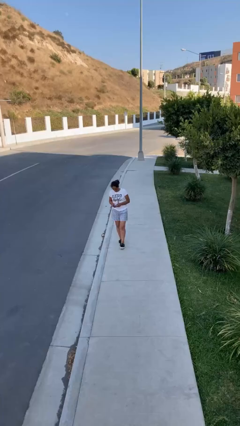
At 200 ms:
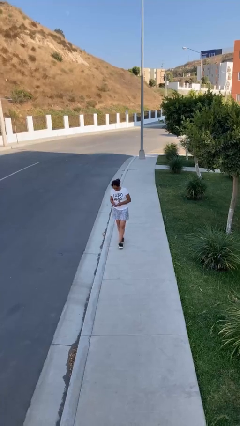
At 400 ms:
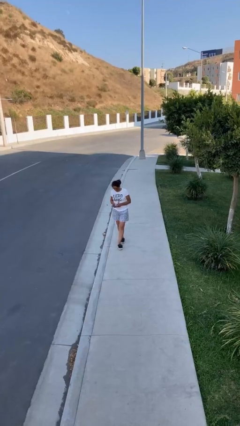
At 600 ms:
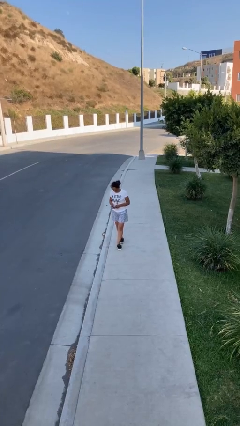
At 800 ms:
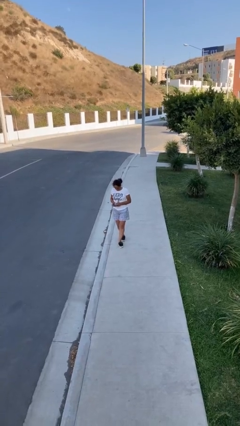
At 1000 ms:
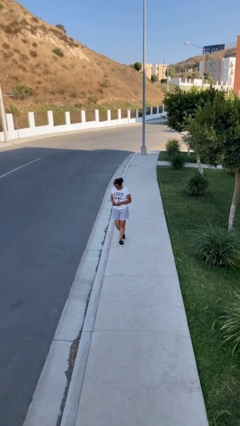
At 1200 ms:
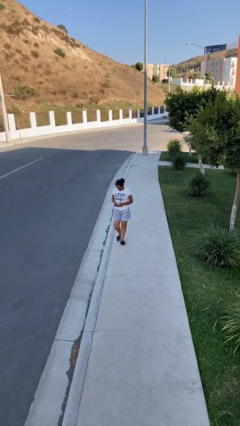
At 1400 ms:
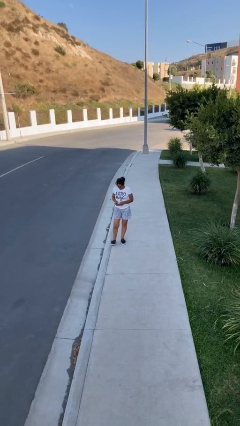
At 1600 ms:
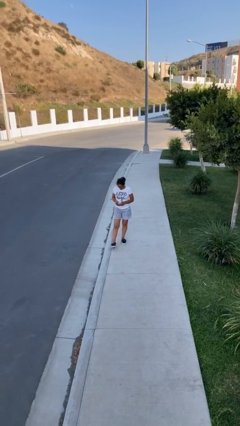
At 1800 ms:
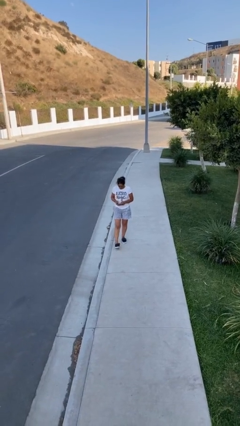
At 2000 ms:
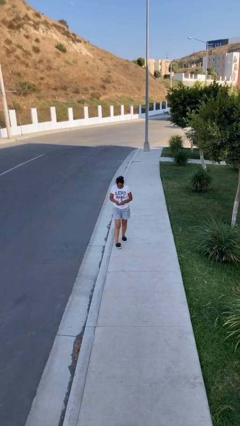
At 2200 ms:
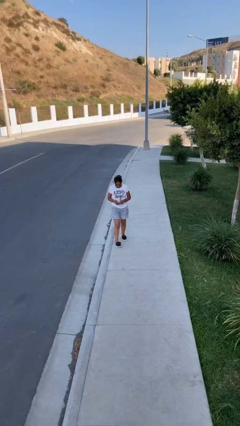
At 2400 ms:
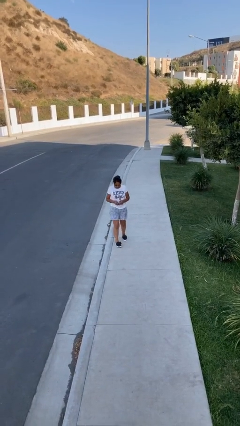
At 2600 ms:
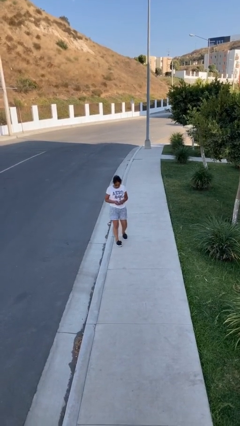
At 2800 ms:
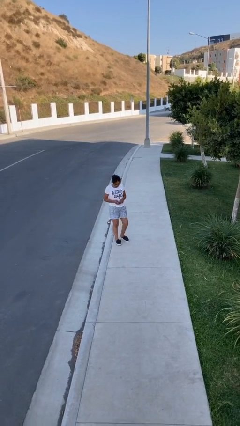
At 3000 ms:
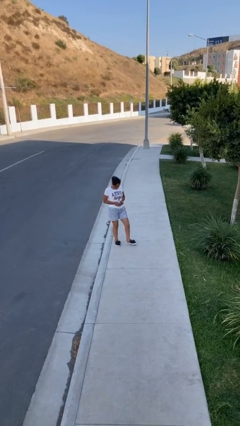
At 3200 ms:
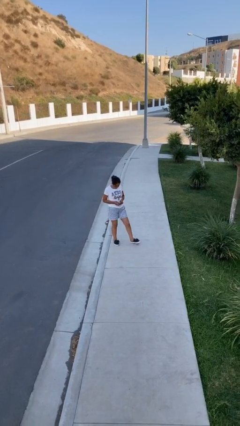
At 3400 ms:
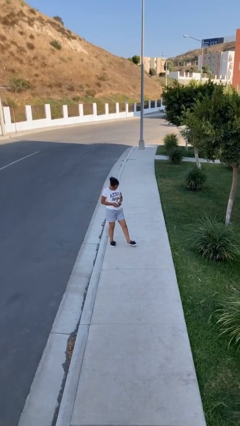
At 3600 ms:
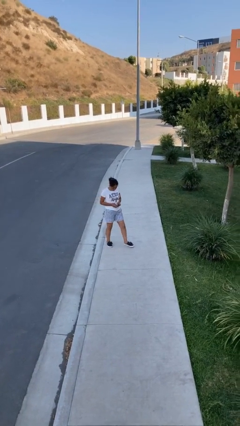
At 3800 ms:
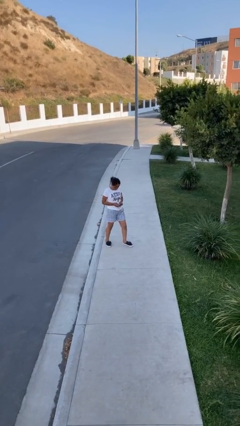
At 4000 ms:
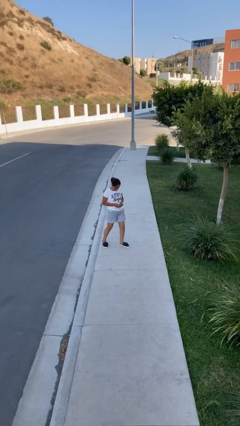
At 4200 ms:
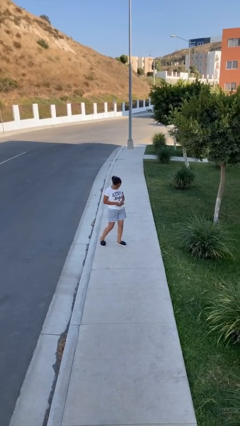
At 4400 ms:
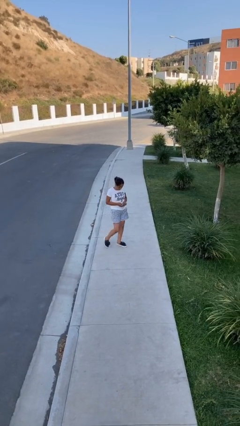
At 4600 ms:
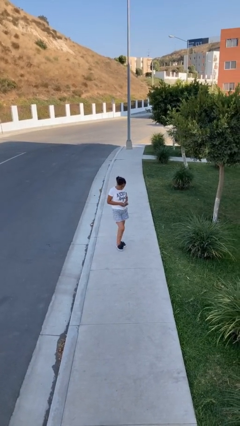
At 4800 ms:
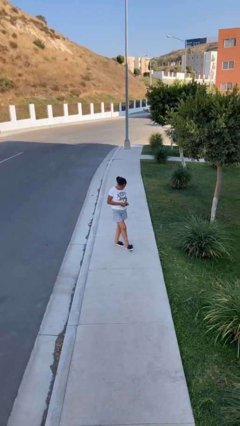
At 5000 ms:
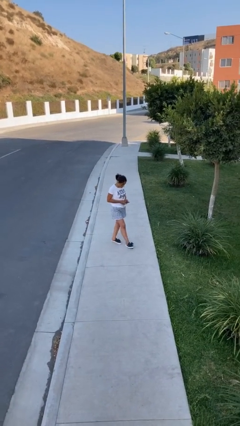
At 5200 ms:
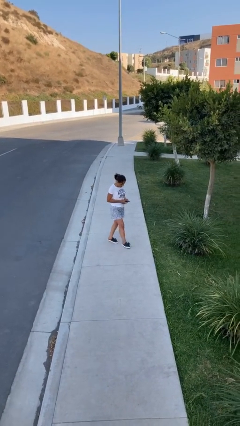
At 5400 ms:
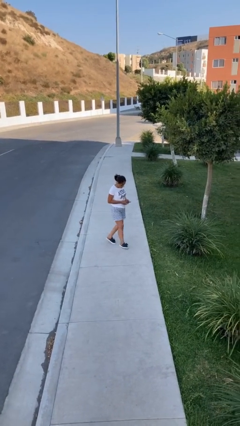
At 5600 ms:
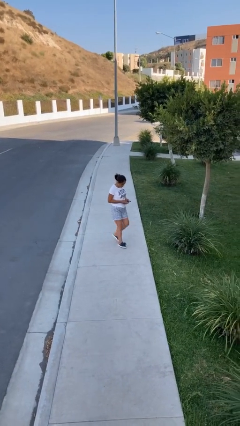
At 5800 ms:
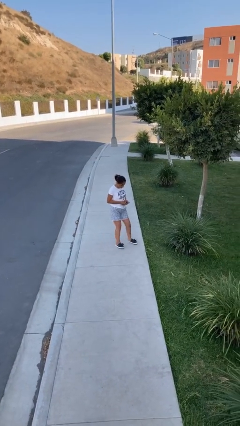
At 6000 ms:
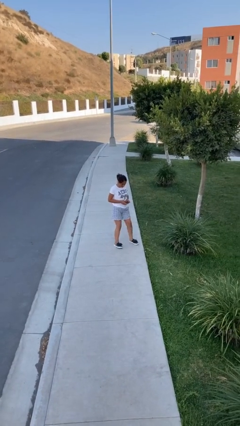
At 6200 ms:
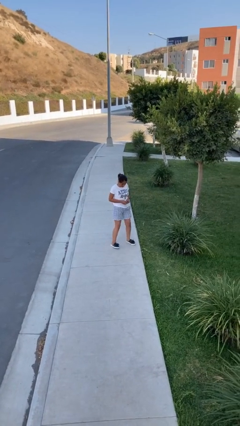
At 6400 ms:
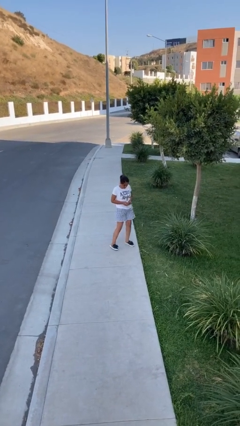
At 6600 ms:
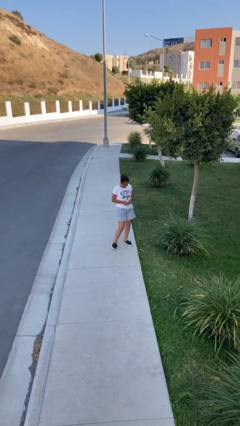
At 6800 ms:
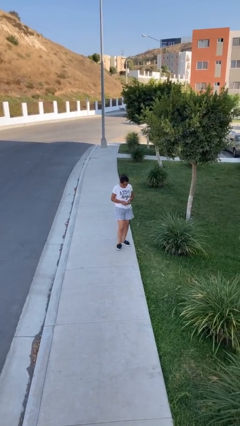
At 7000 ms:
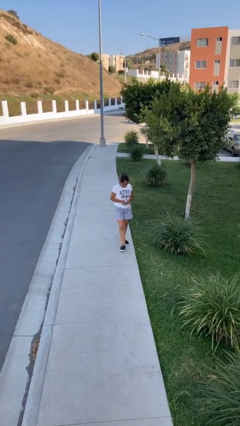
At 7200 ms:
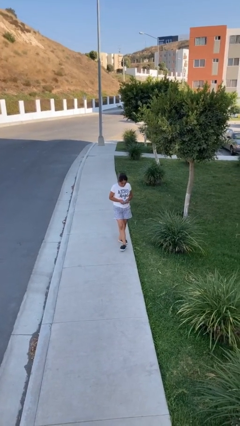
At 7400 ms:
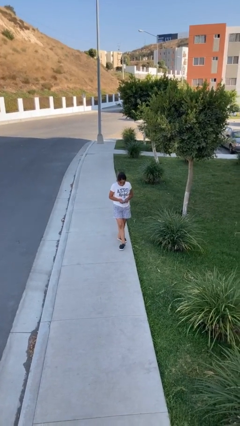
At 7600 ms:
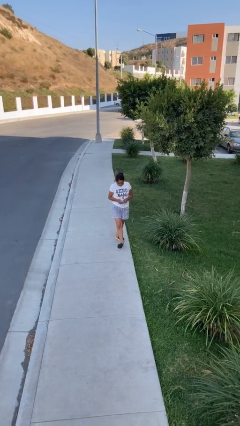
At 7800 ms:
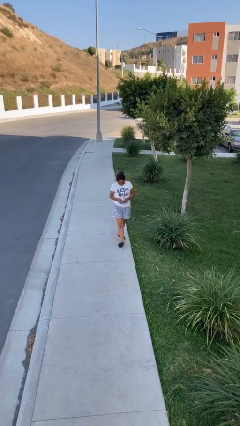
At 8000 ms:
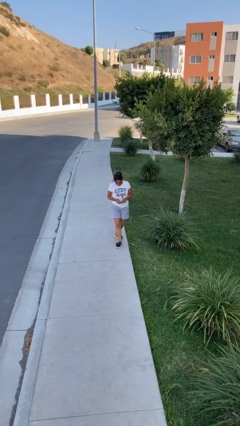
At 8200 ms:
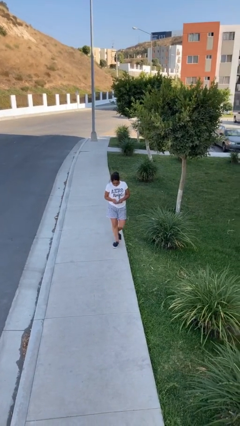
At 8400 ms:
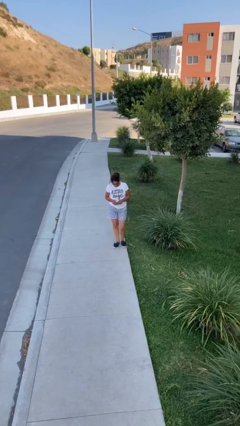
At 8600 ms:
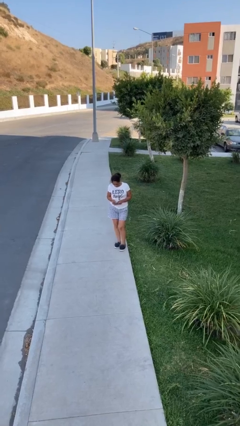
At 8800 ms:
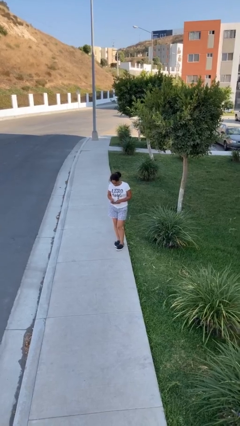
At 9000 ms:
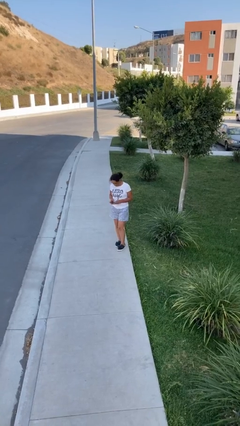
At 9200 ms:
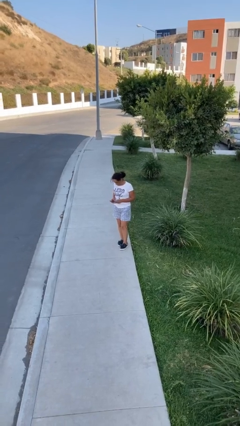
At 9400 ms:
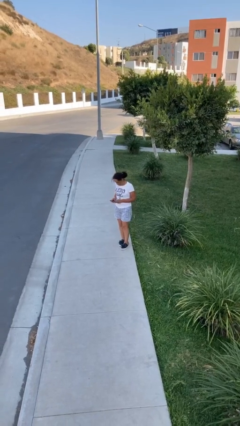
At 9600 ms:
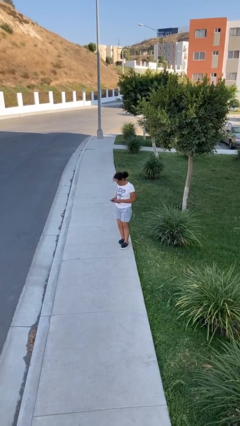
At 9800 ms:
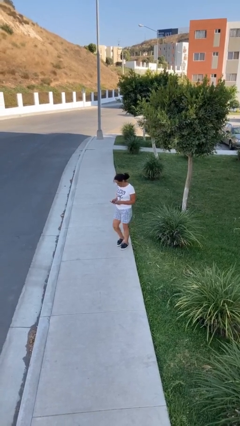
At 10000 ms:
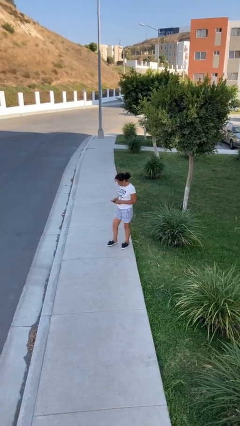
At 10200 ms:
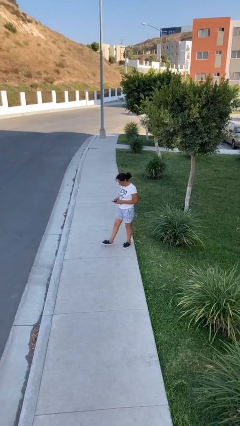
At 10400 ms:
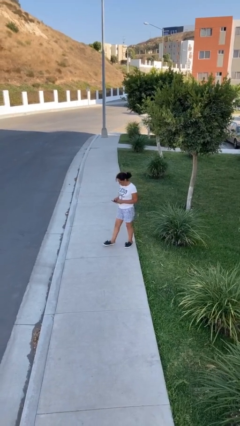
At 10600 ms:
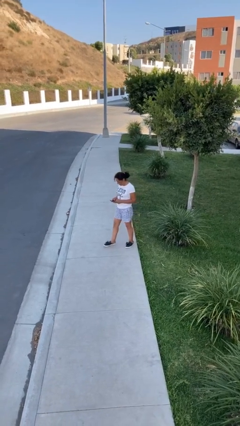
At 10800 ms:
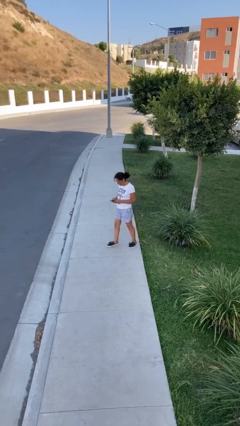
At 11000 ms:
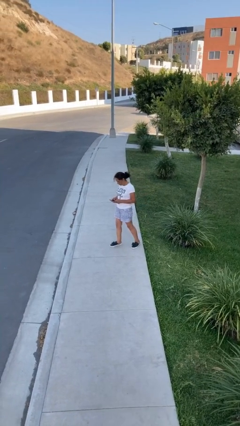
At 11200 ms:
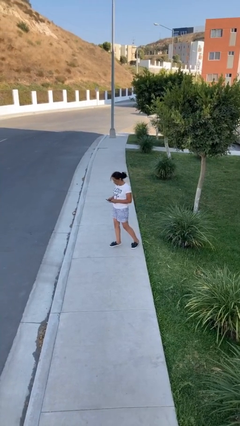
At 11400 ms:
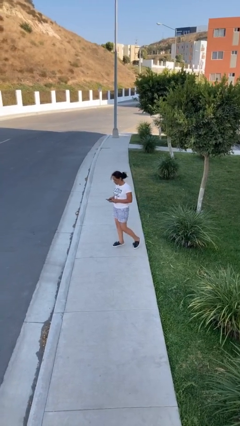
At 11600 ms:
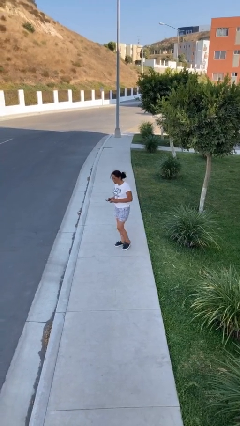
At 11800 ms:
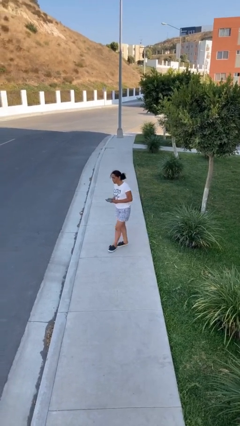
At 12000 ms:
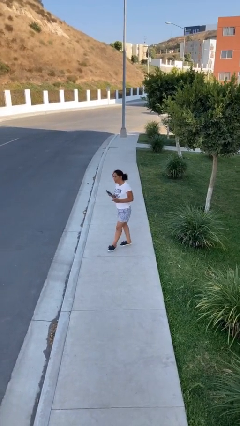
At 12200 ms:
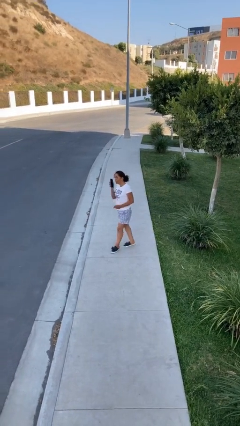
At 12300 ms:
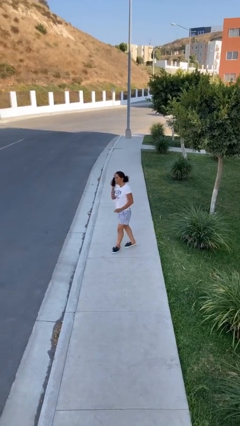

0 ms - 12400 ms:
person texts on phone

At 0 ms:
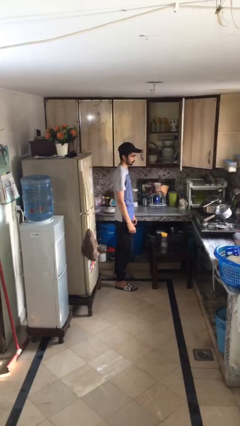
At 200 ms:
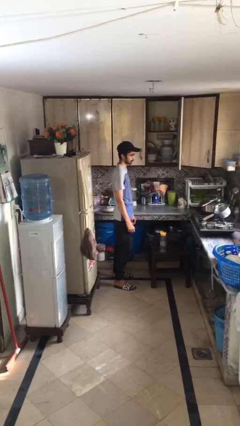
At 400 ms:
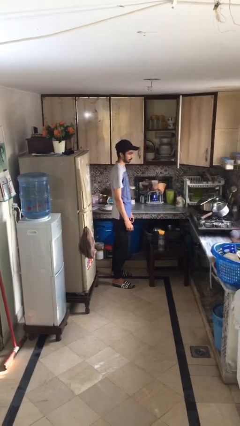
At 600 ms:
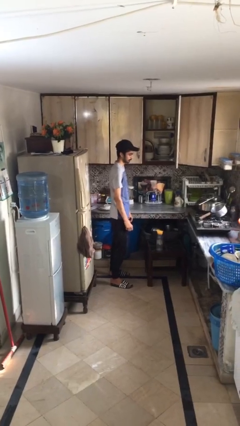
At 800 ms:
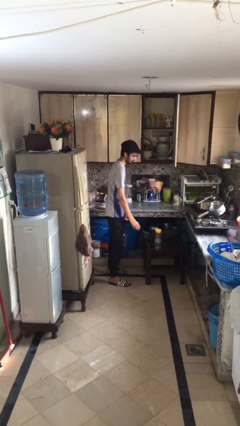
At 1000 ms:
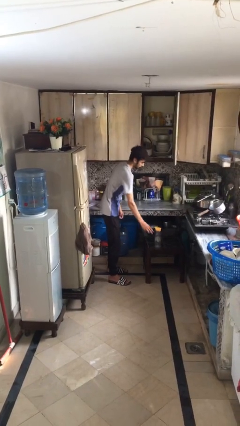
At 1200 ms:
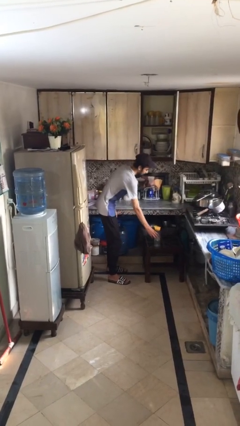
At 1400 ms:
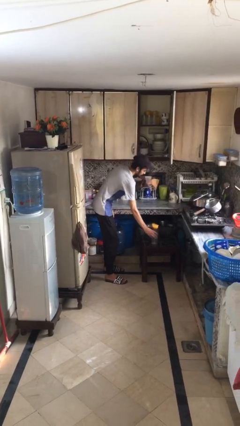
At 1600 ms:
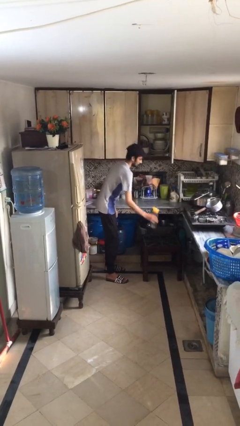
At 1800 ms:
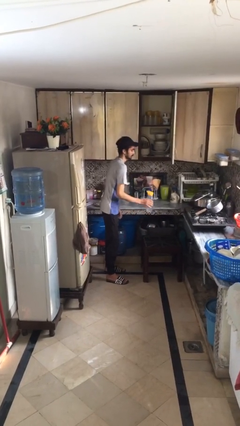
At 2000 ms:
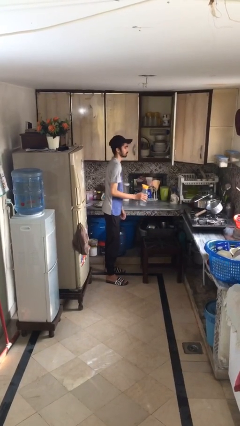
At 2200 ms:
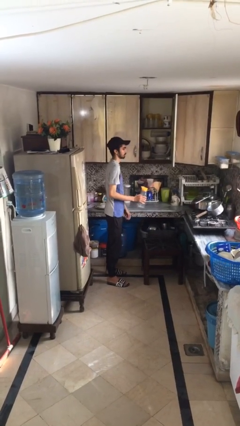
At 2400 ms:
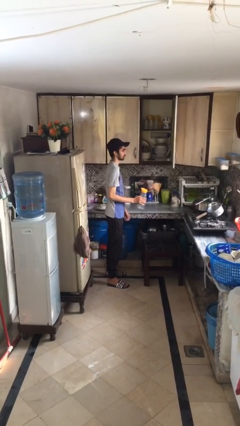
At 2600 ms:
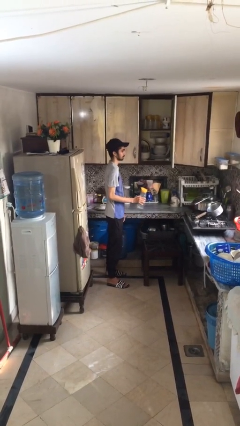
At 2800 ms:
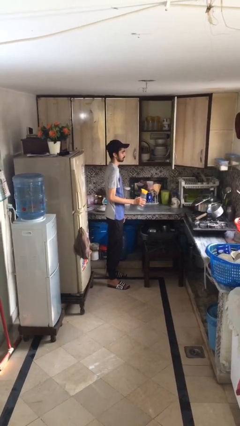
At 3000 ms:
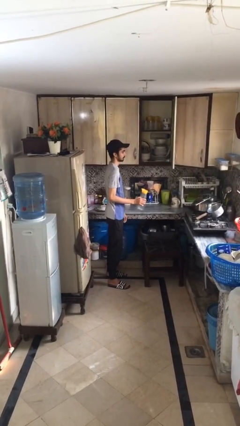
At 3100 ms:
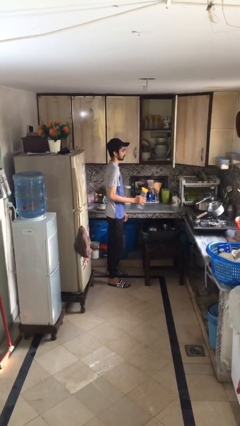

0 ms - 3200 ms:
person picks up object from table

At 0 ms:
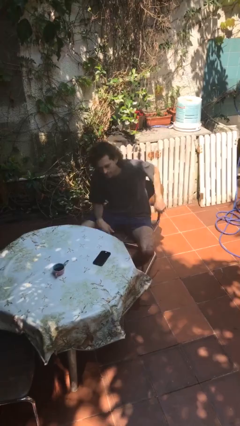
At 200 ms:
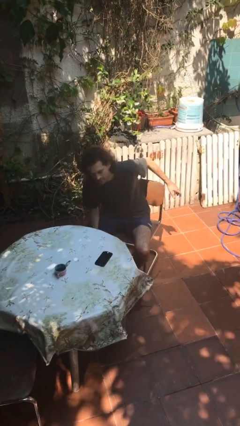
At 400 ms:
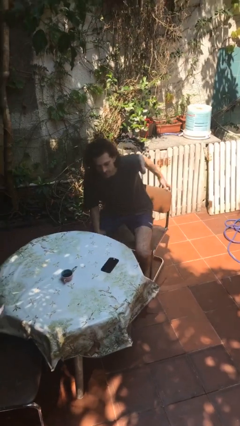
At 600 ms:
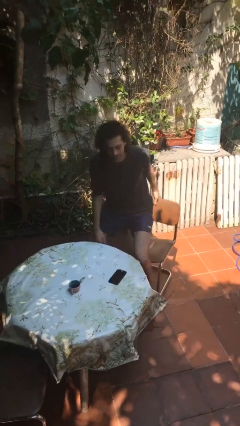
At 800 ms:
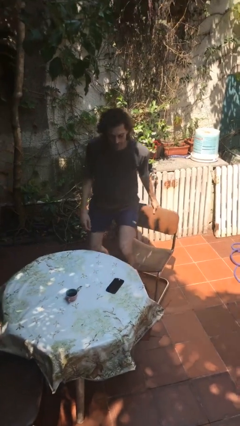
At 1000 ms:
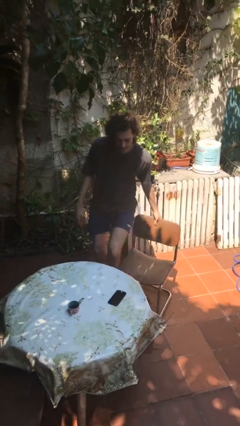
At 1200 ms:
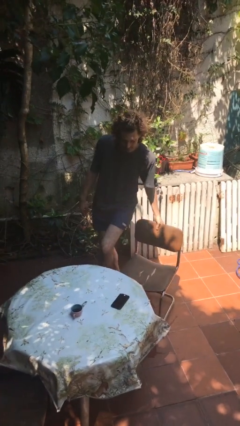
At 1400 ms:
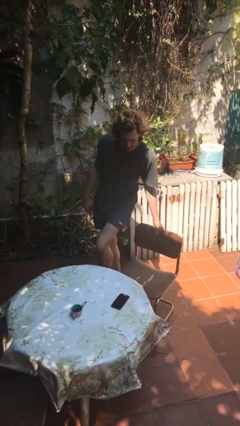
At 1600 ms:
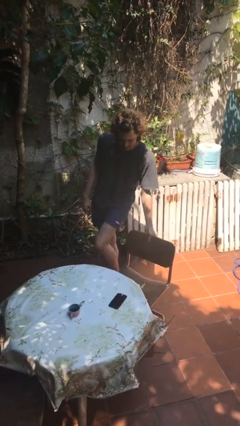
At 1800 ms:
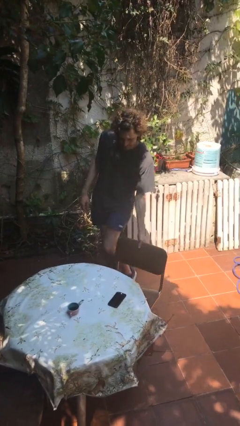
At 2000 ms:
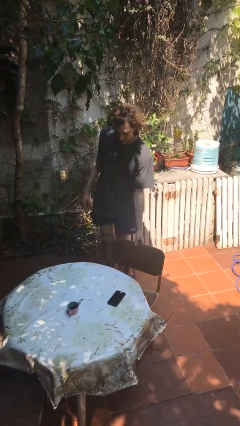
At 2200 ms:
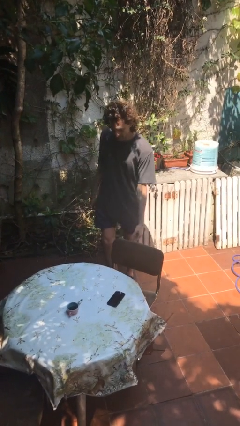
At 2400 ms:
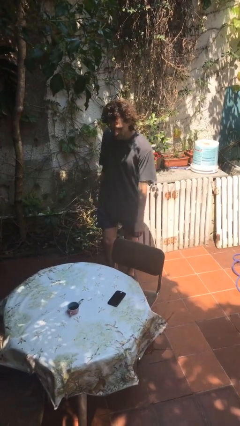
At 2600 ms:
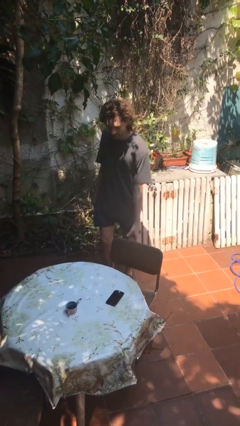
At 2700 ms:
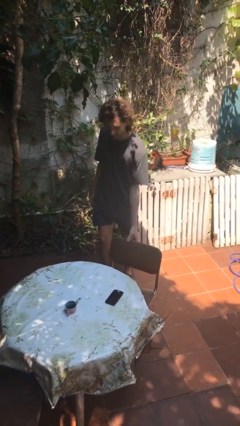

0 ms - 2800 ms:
person stands up
